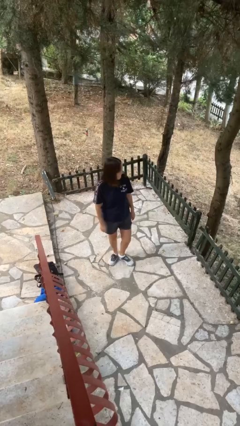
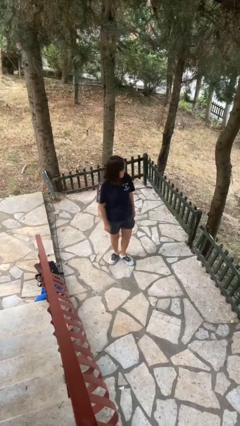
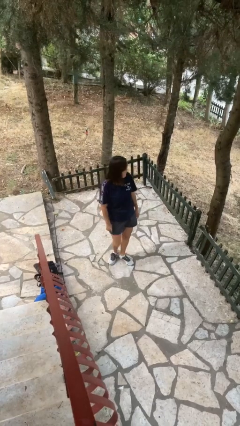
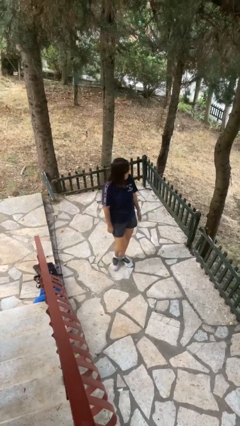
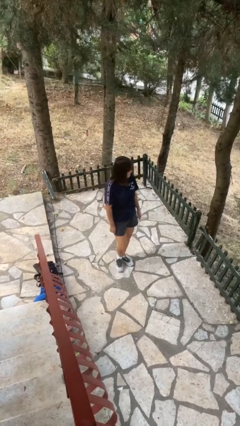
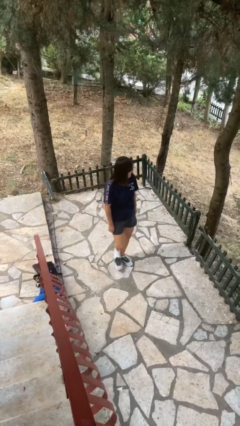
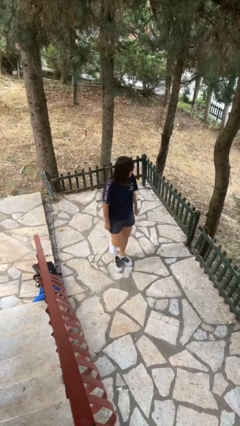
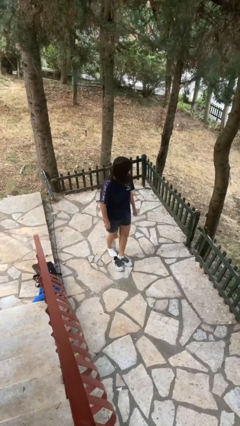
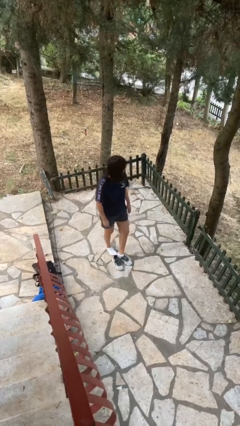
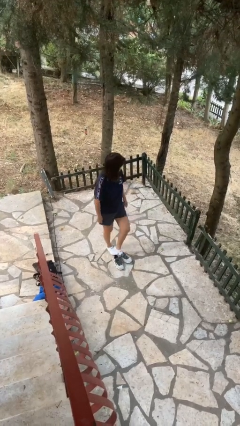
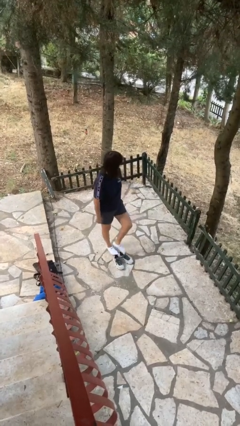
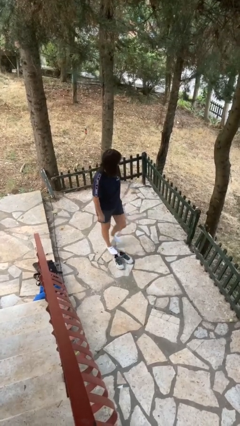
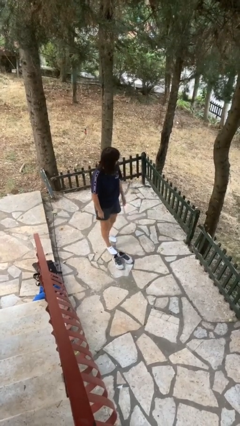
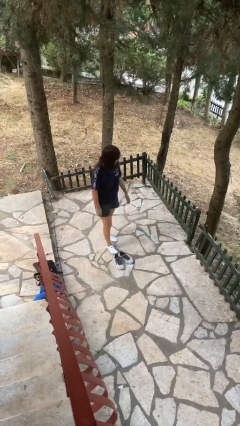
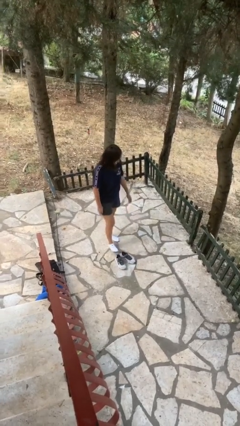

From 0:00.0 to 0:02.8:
person takes off shoes

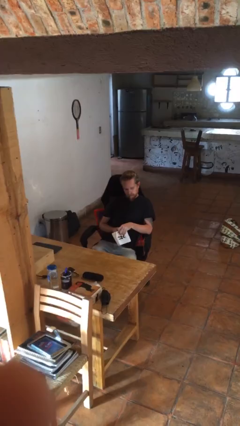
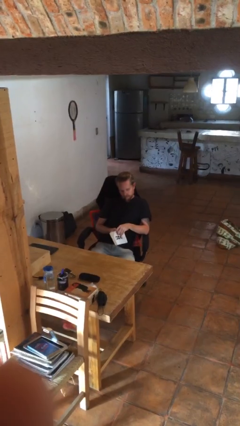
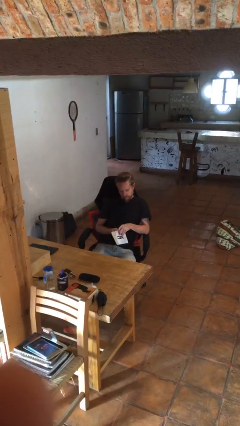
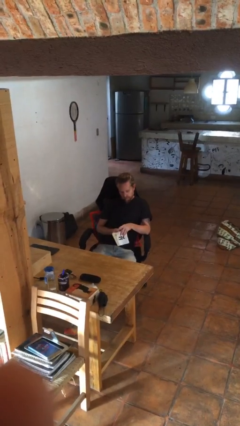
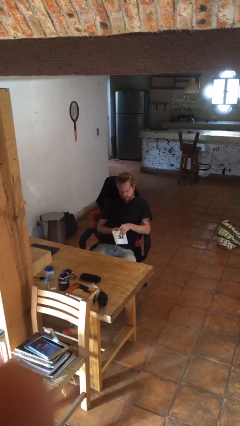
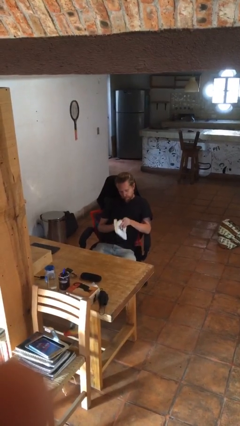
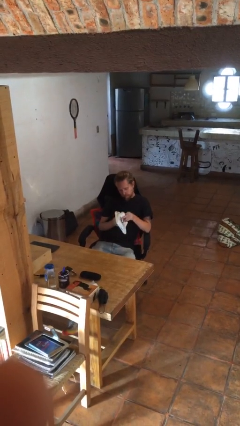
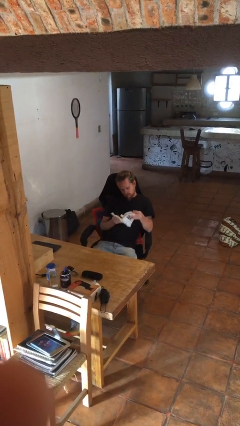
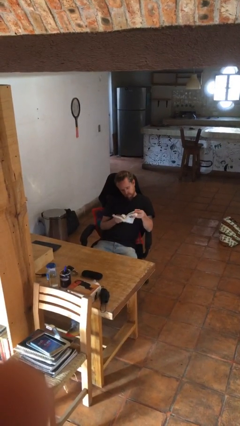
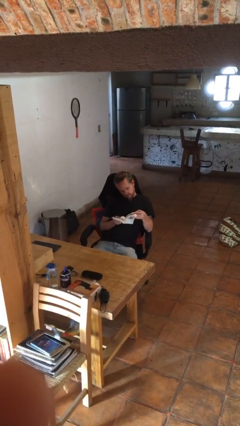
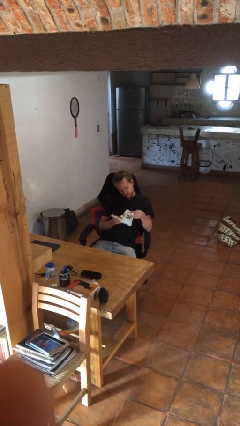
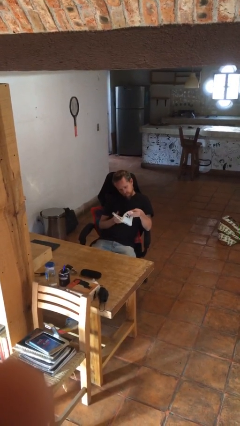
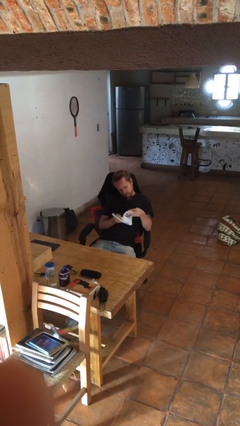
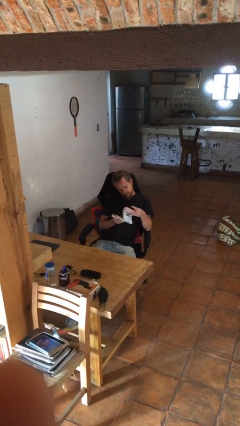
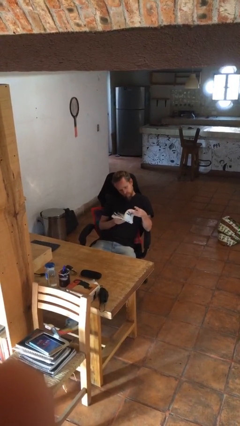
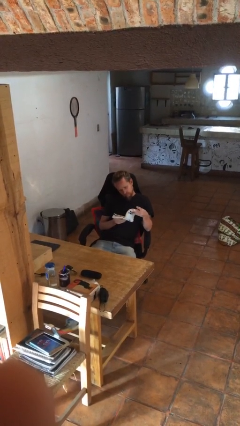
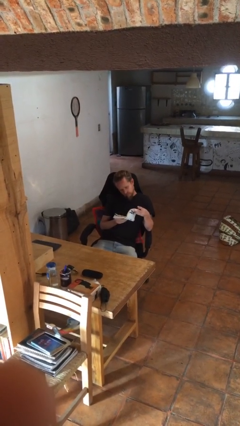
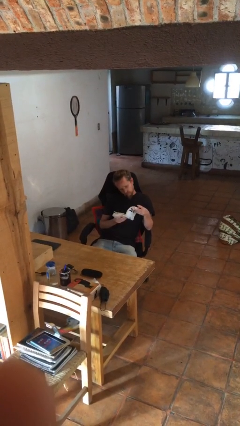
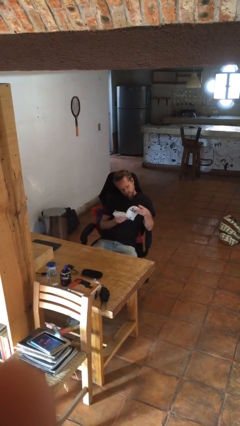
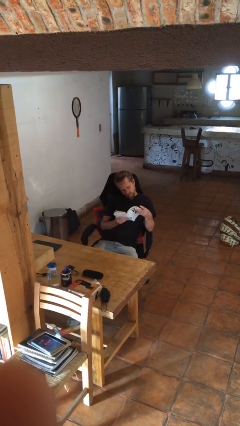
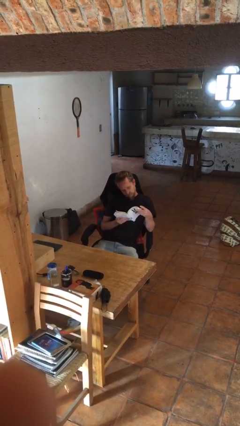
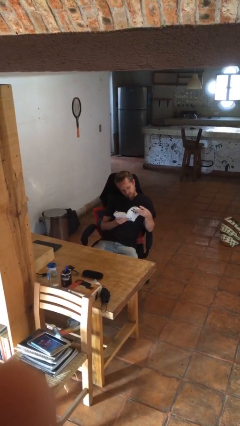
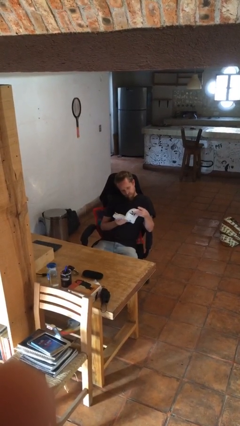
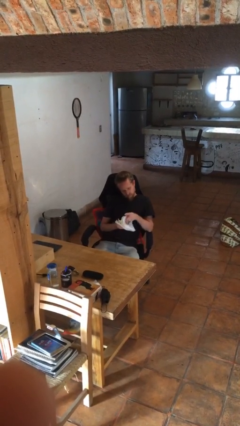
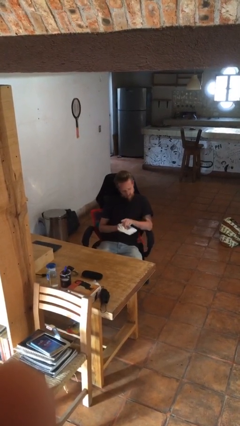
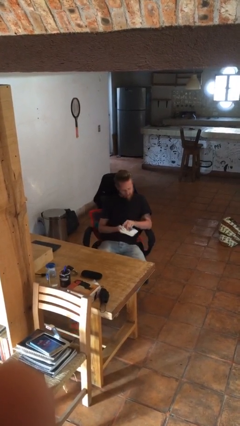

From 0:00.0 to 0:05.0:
person reads book

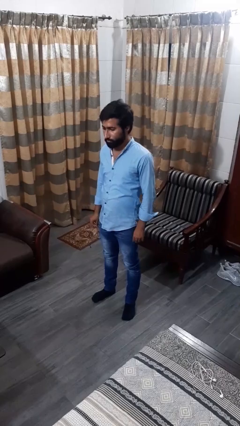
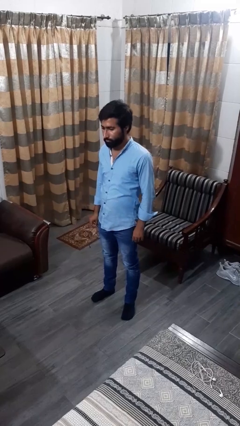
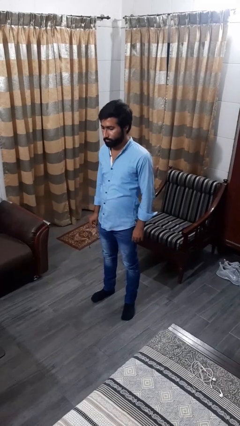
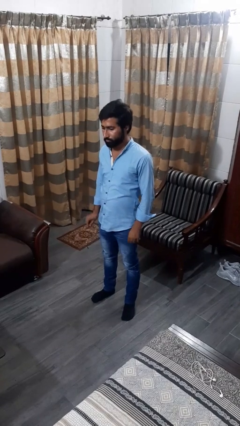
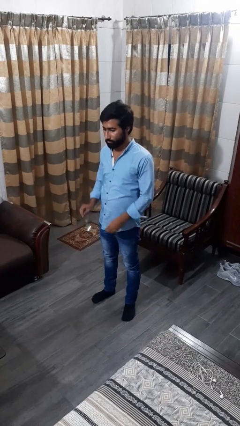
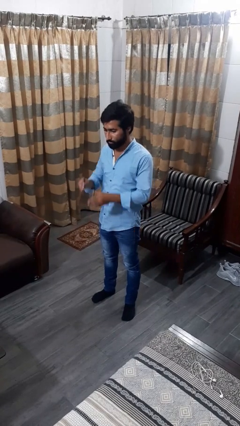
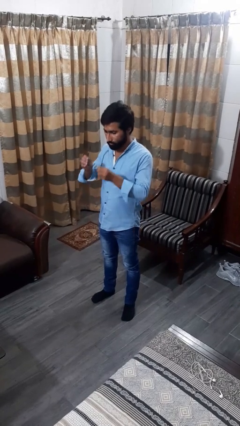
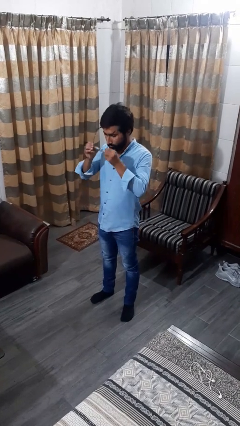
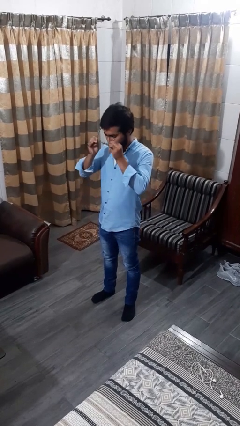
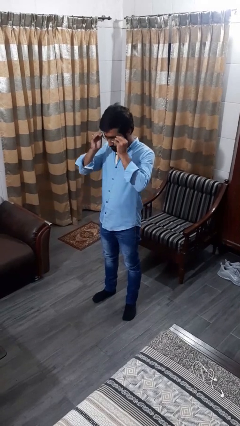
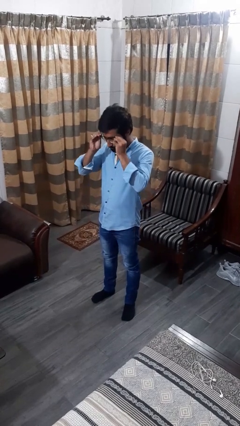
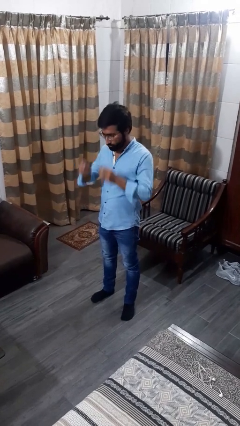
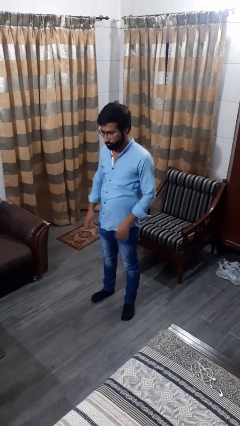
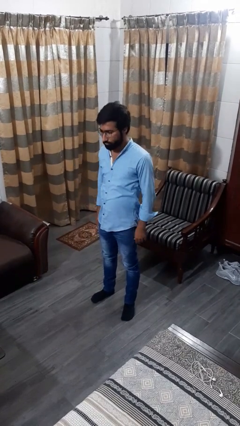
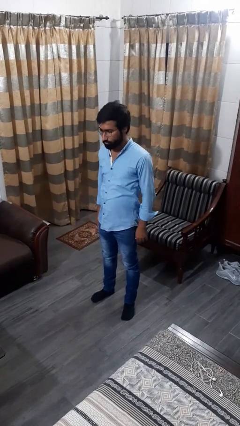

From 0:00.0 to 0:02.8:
person puts on glasses

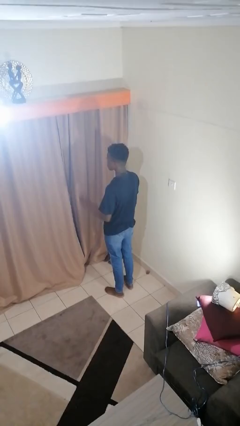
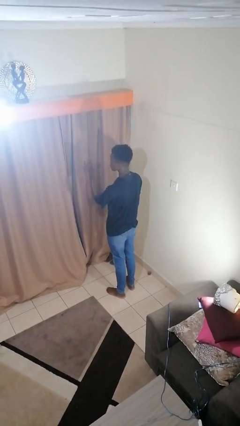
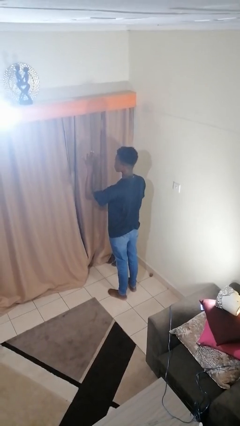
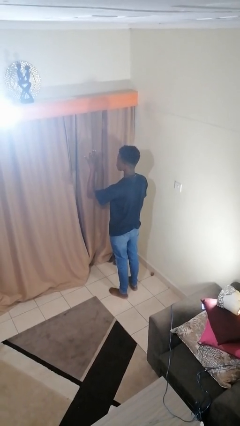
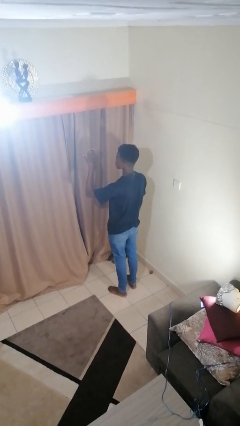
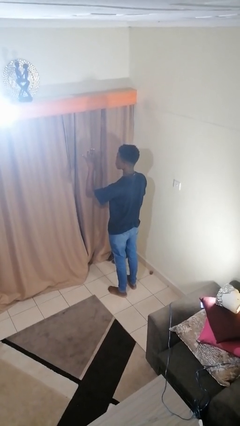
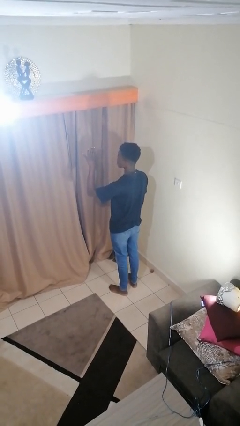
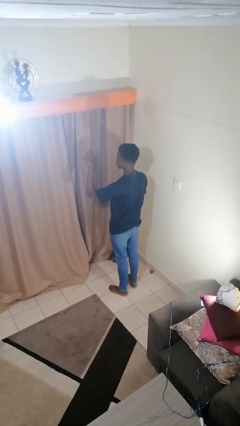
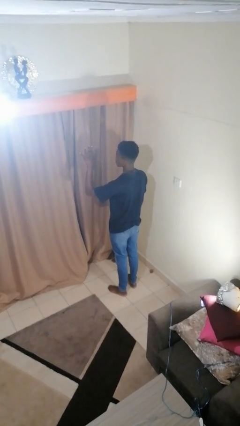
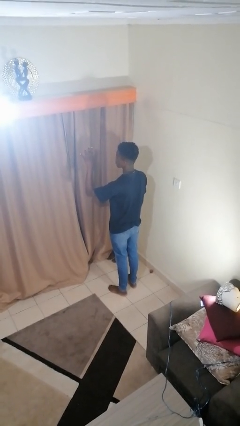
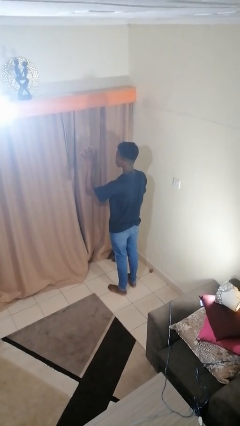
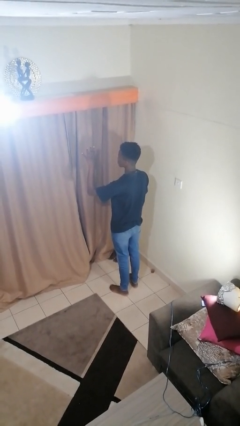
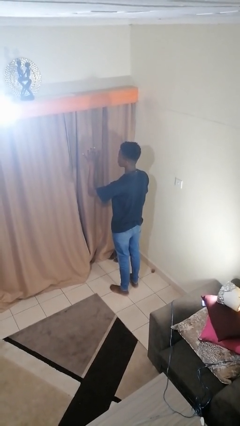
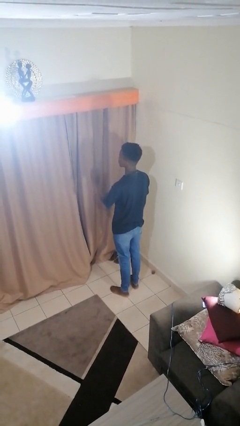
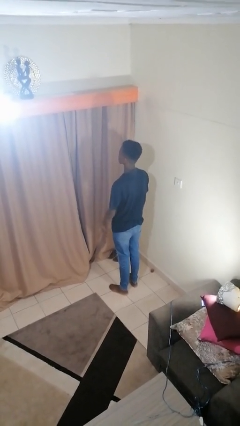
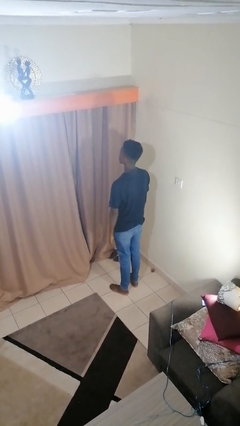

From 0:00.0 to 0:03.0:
person gestures number four

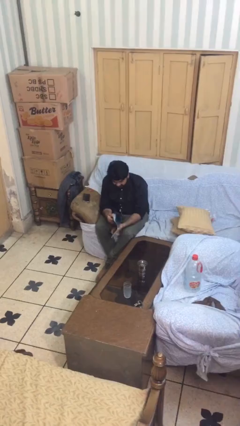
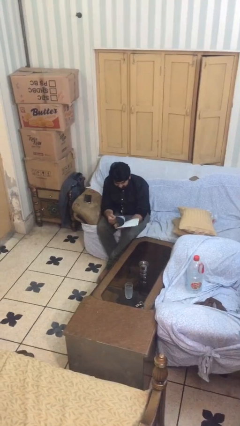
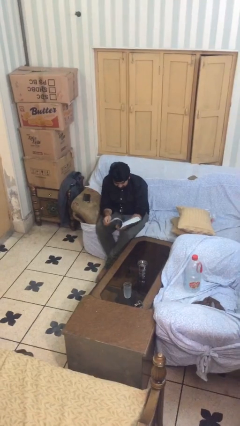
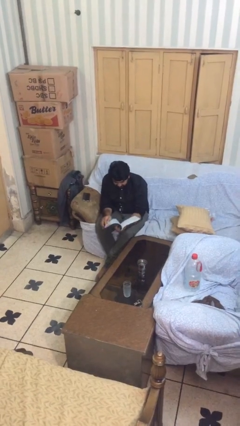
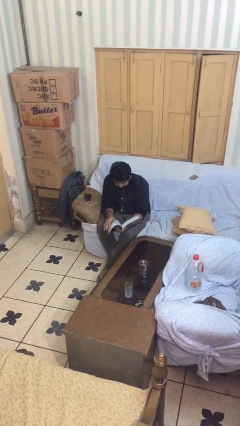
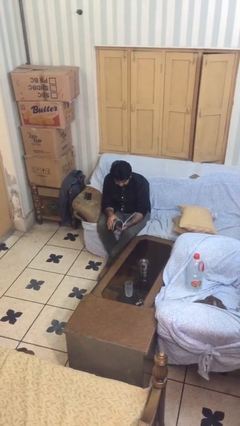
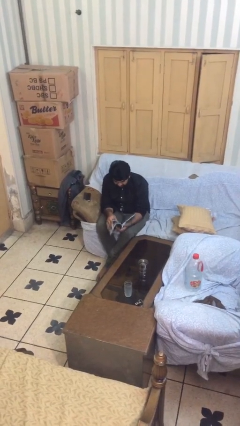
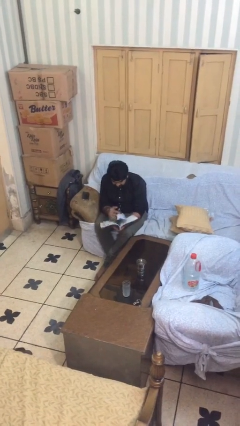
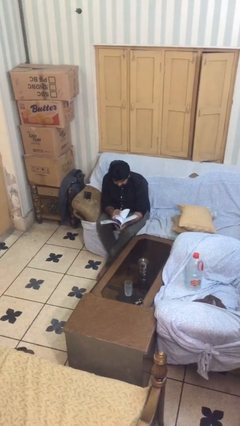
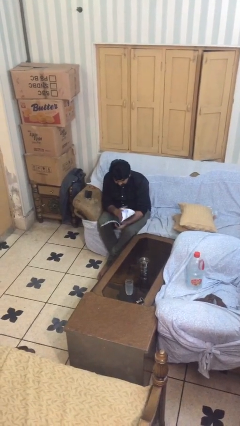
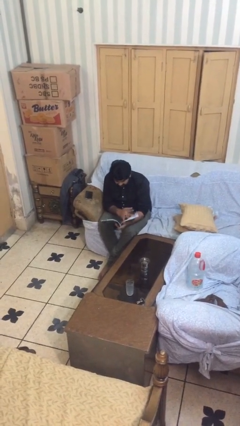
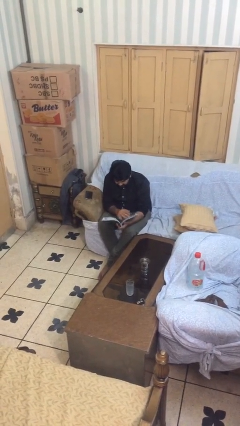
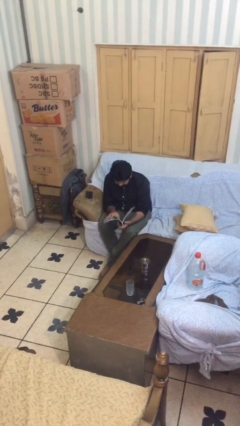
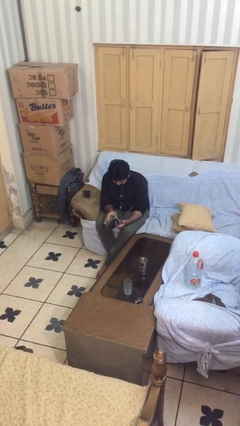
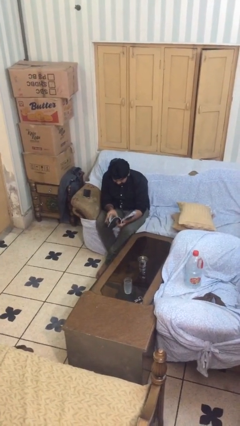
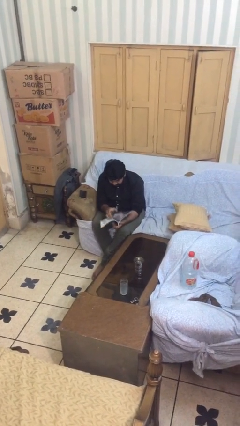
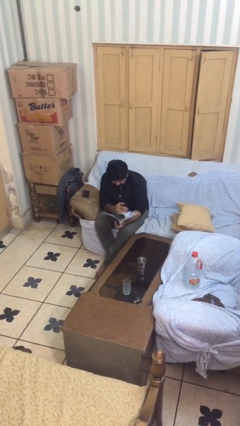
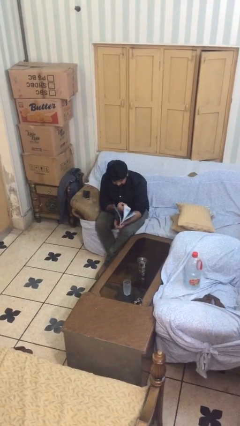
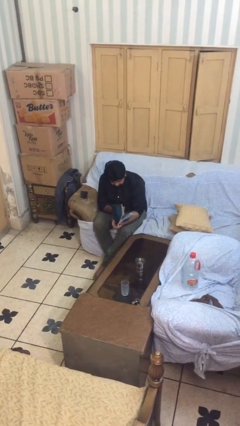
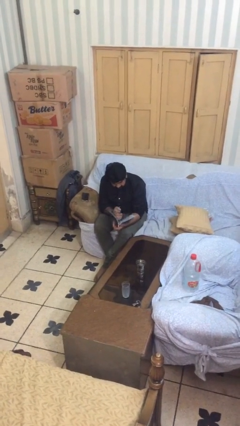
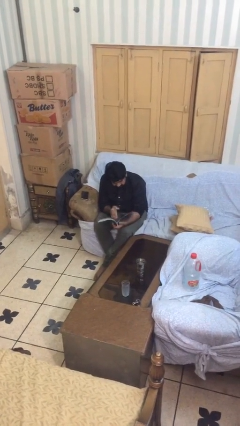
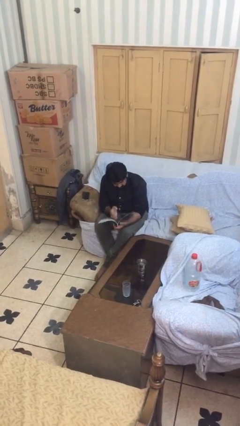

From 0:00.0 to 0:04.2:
person reads document
